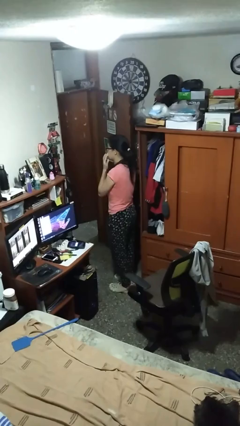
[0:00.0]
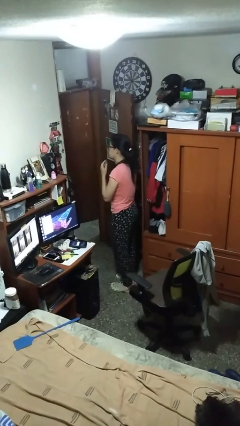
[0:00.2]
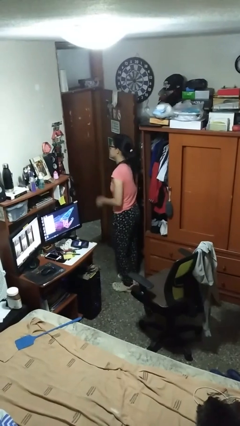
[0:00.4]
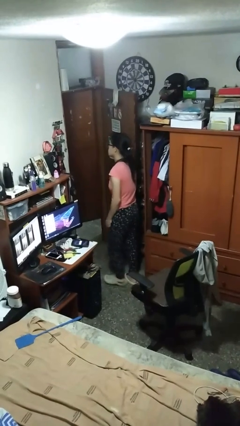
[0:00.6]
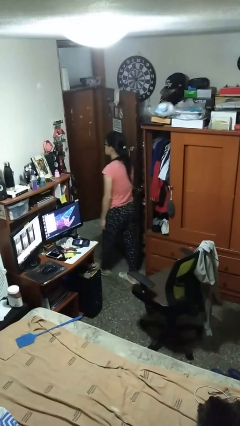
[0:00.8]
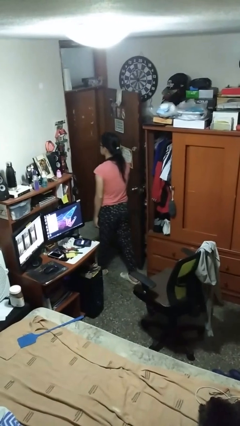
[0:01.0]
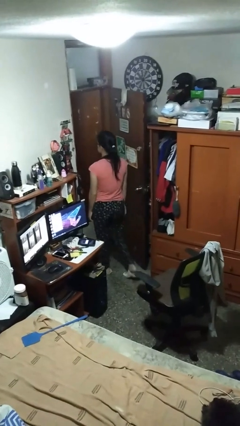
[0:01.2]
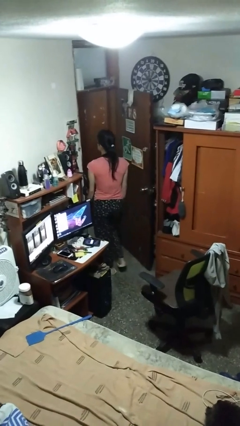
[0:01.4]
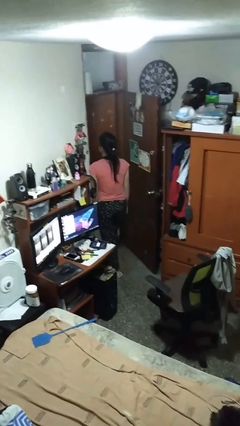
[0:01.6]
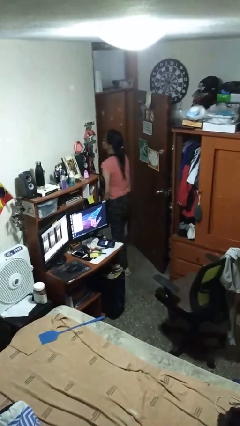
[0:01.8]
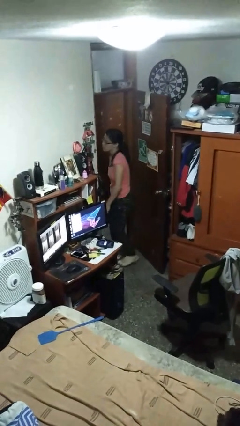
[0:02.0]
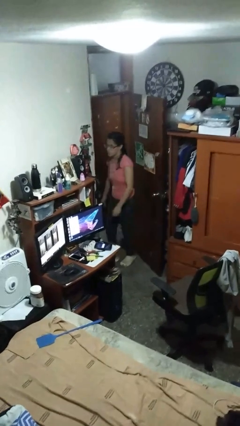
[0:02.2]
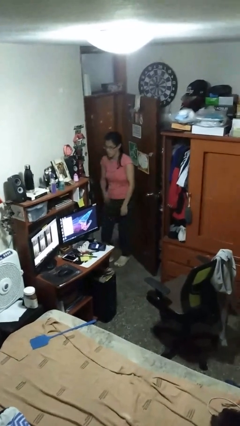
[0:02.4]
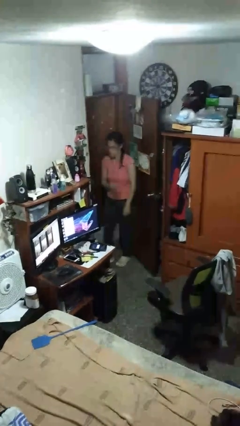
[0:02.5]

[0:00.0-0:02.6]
person bumps into wall

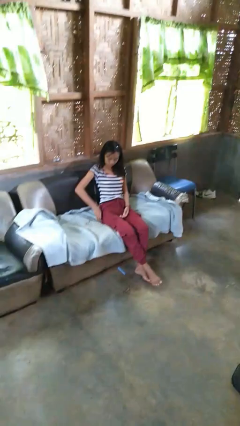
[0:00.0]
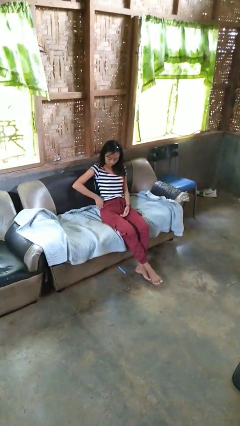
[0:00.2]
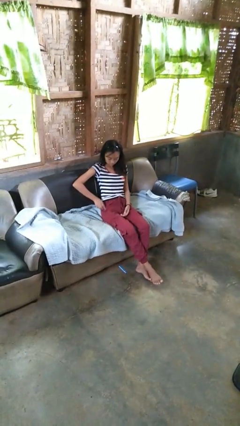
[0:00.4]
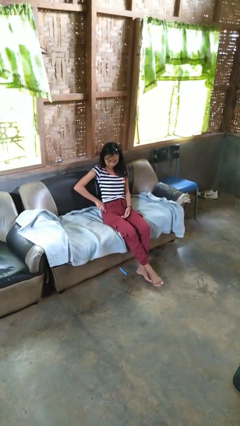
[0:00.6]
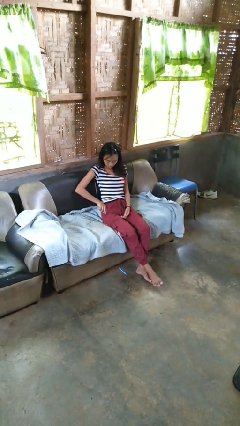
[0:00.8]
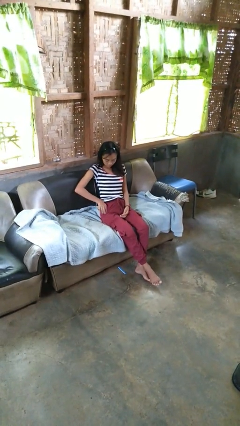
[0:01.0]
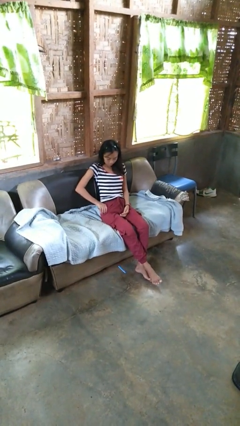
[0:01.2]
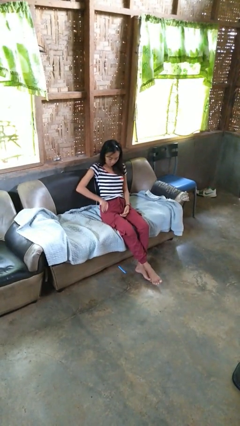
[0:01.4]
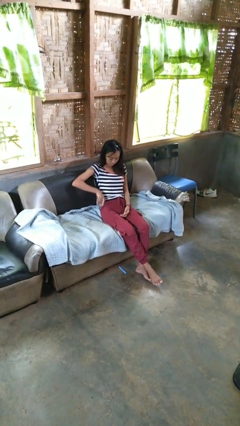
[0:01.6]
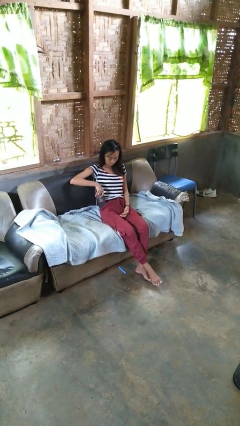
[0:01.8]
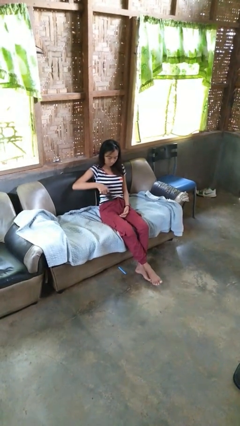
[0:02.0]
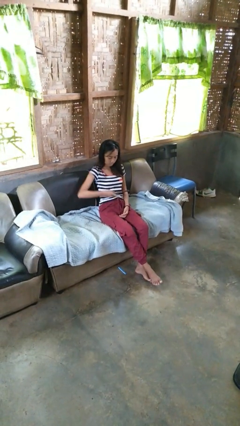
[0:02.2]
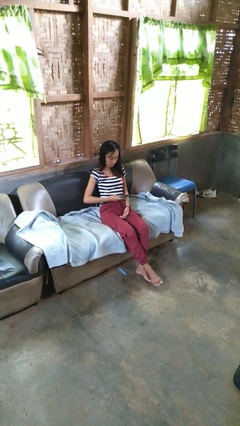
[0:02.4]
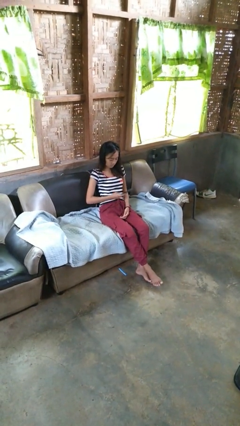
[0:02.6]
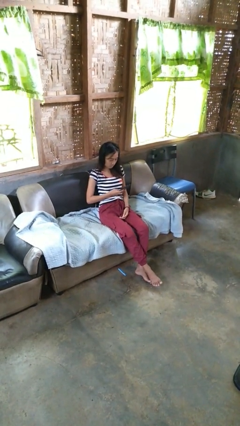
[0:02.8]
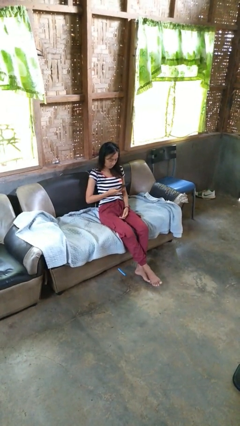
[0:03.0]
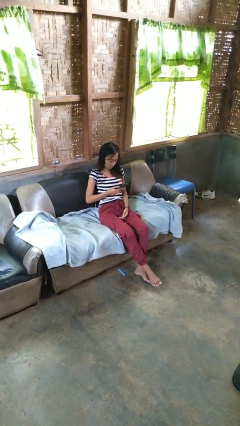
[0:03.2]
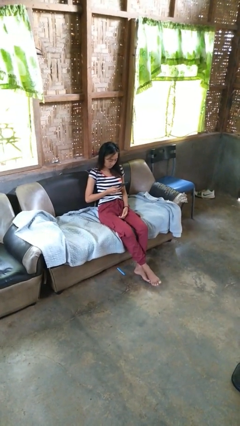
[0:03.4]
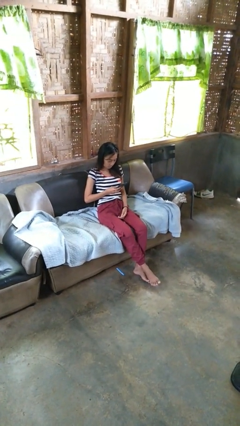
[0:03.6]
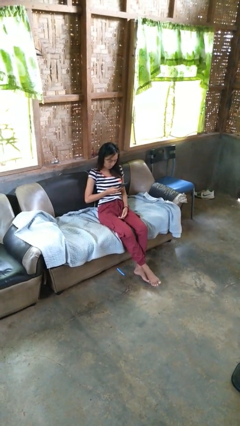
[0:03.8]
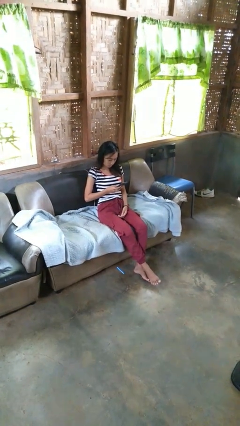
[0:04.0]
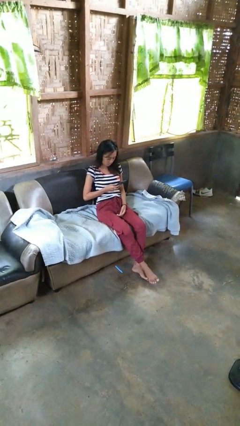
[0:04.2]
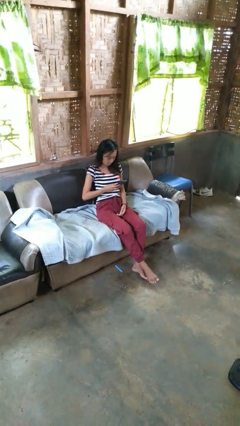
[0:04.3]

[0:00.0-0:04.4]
person takes phone from pocket

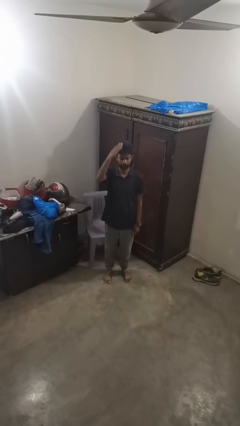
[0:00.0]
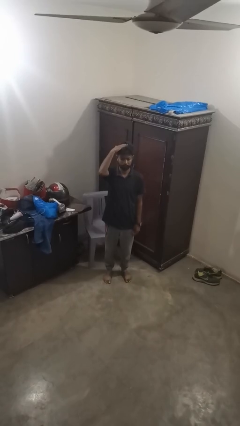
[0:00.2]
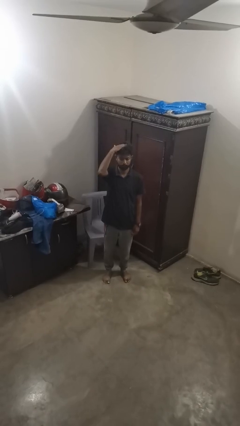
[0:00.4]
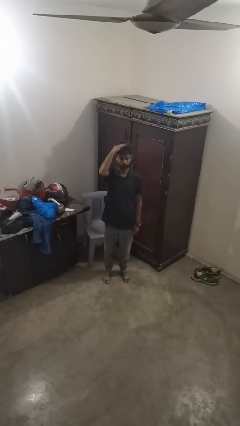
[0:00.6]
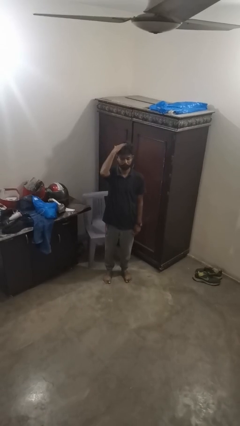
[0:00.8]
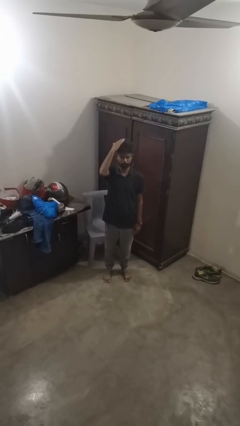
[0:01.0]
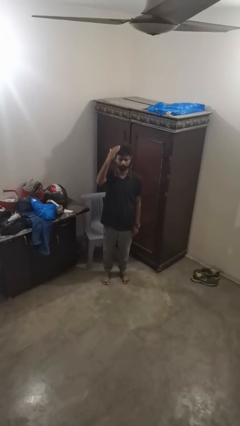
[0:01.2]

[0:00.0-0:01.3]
person pats head

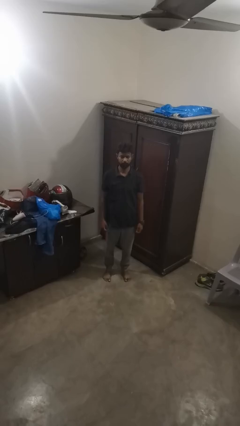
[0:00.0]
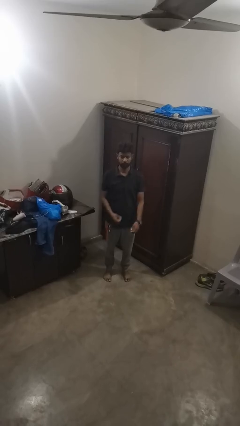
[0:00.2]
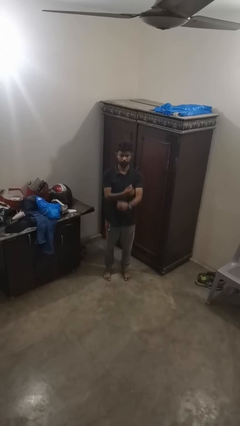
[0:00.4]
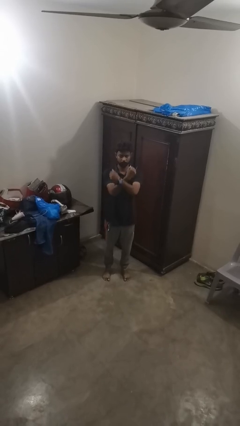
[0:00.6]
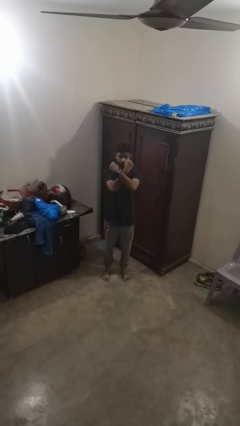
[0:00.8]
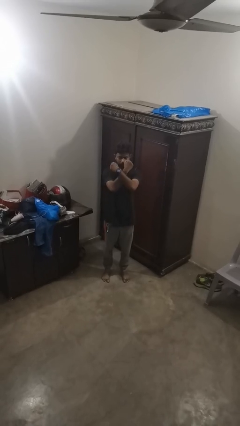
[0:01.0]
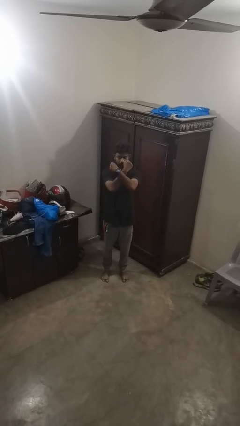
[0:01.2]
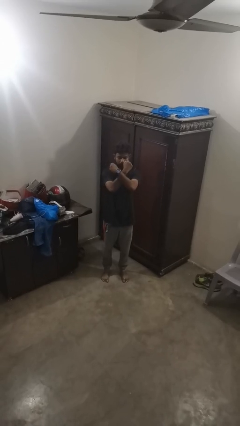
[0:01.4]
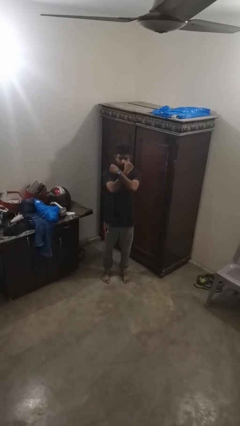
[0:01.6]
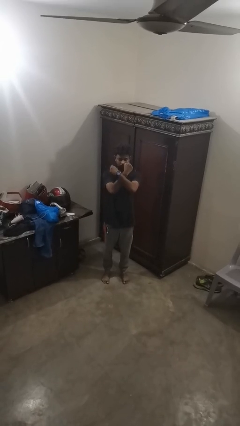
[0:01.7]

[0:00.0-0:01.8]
person gestures arms x

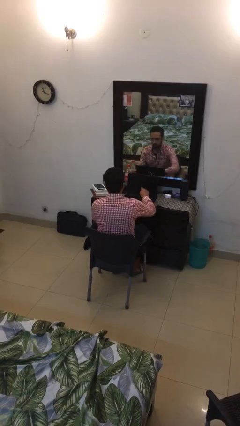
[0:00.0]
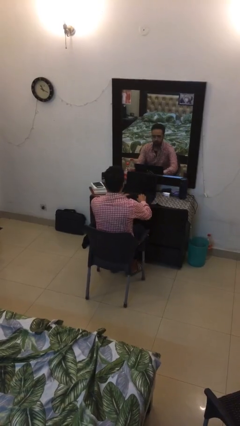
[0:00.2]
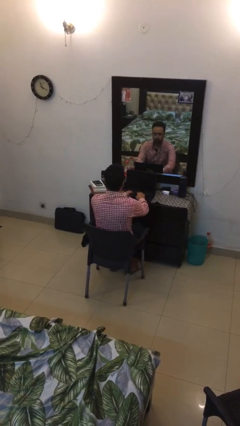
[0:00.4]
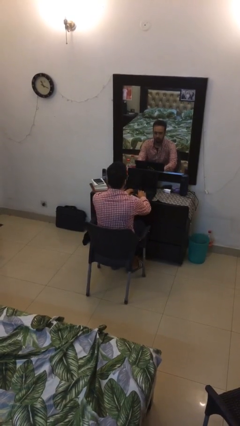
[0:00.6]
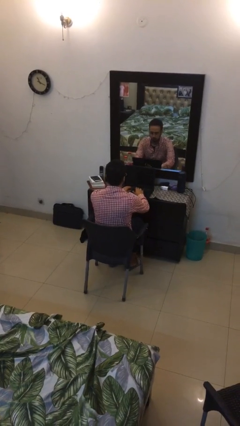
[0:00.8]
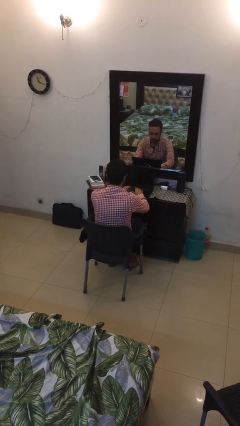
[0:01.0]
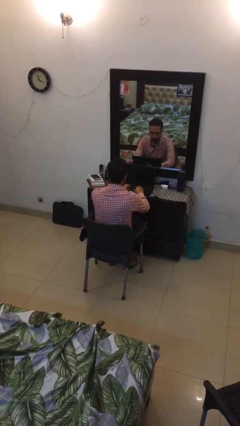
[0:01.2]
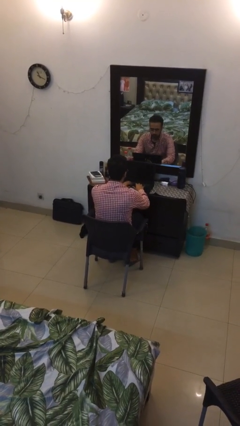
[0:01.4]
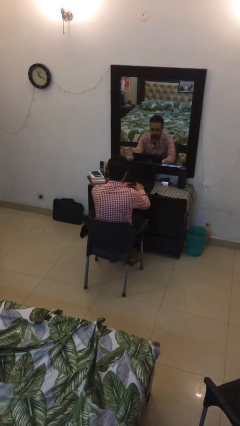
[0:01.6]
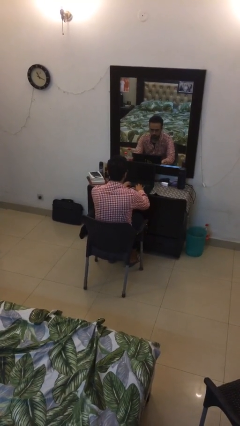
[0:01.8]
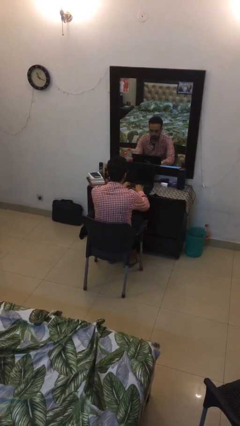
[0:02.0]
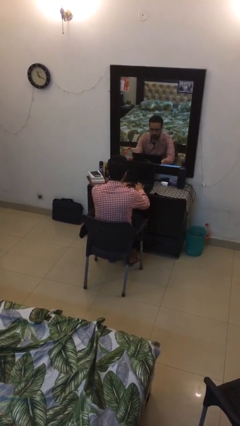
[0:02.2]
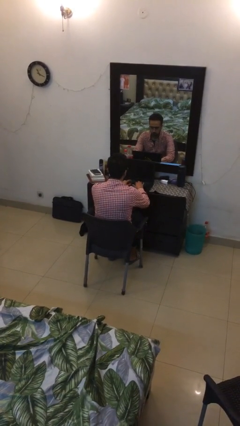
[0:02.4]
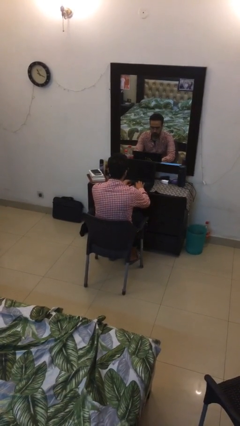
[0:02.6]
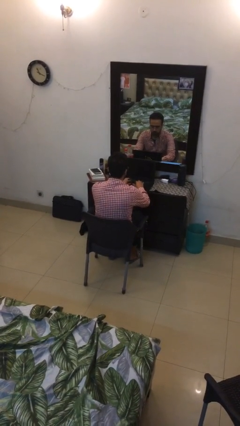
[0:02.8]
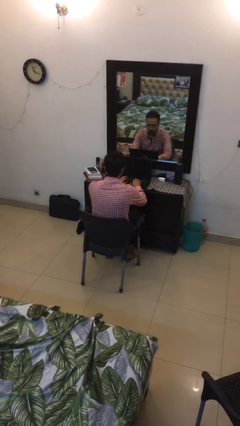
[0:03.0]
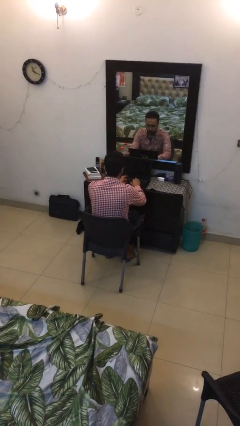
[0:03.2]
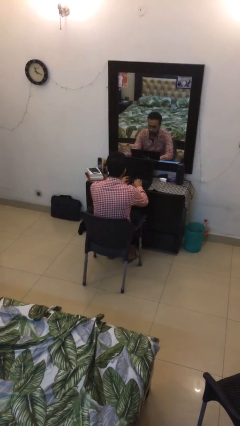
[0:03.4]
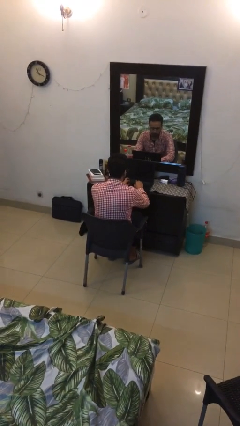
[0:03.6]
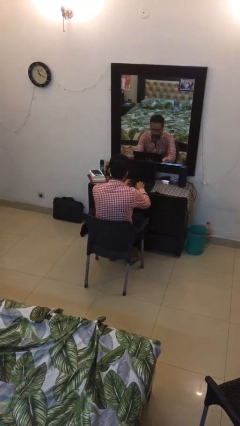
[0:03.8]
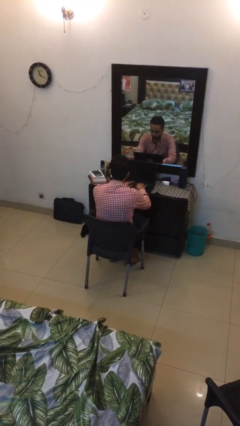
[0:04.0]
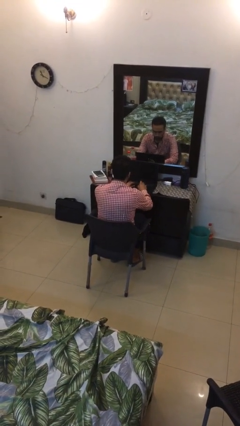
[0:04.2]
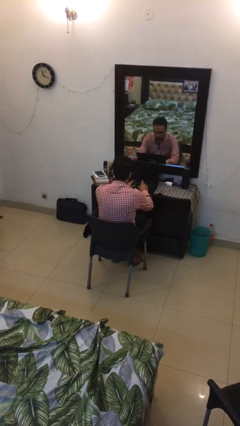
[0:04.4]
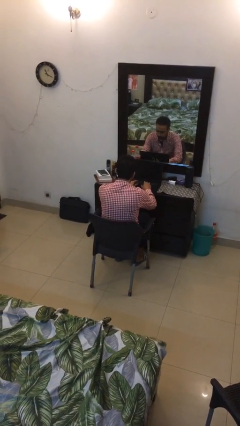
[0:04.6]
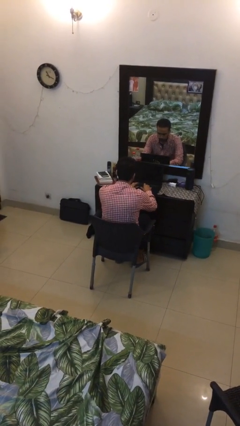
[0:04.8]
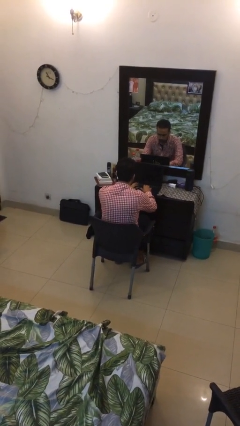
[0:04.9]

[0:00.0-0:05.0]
person interacts with laptop

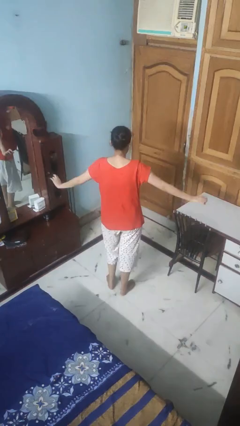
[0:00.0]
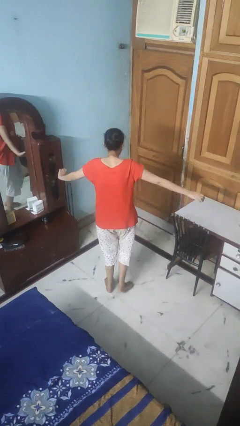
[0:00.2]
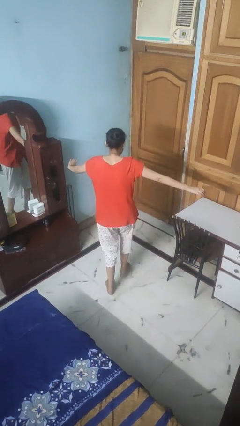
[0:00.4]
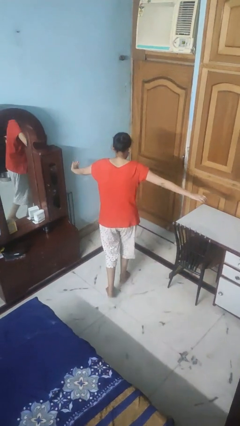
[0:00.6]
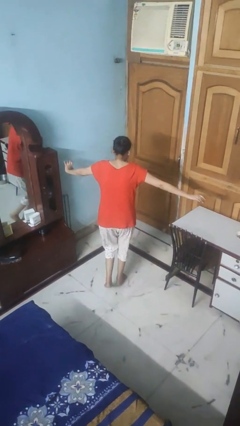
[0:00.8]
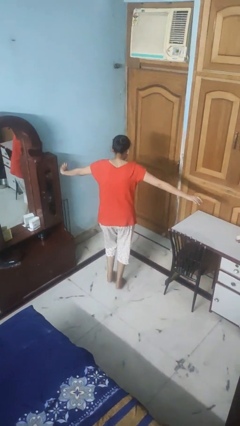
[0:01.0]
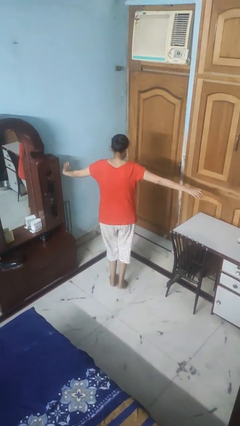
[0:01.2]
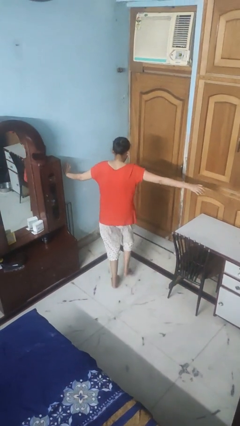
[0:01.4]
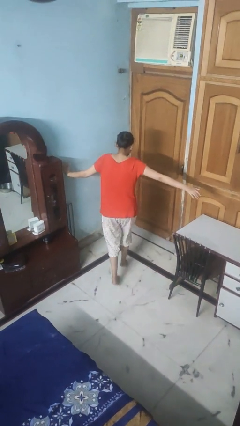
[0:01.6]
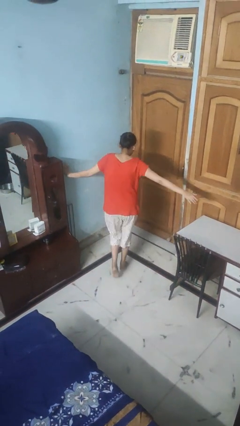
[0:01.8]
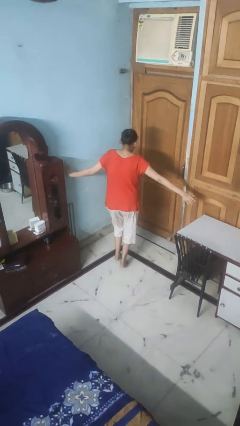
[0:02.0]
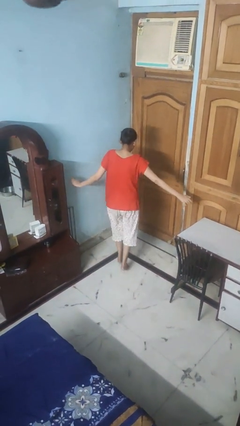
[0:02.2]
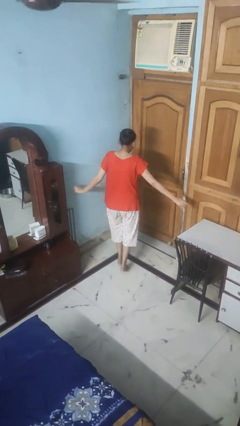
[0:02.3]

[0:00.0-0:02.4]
person walks tiptoe

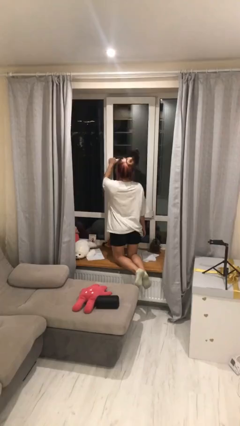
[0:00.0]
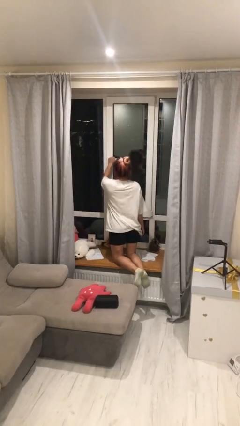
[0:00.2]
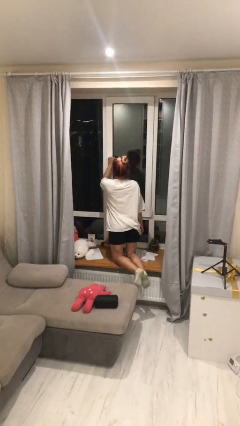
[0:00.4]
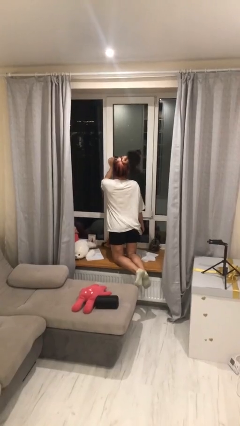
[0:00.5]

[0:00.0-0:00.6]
person closes home window
